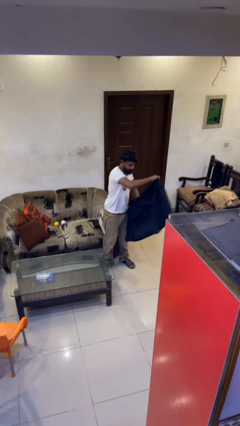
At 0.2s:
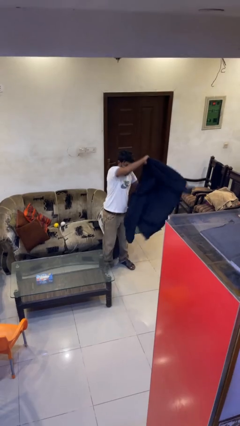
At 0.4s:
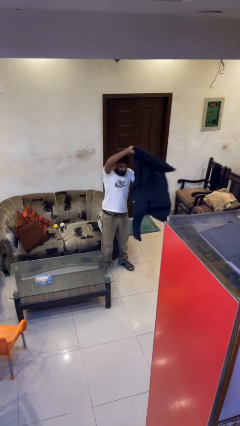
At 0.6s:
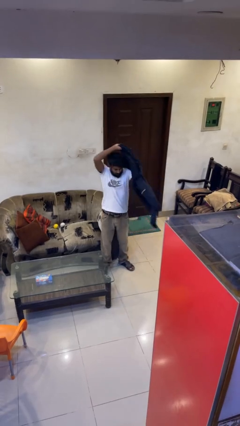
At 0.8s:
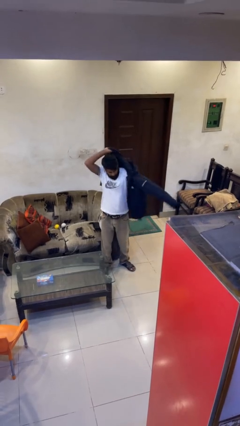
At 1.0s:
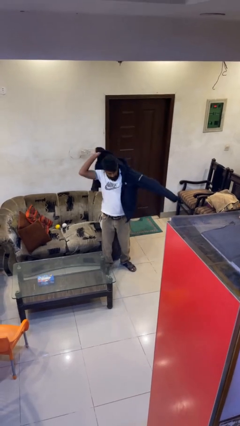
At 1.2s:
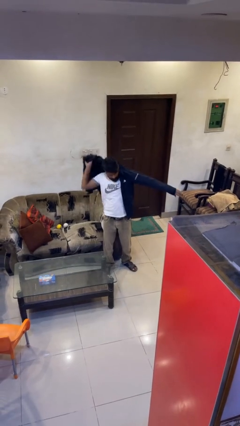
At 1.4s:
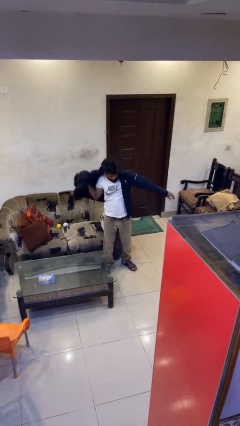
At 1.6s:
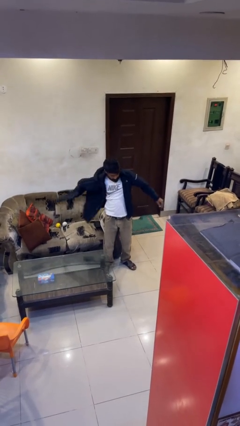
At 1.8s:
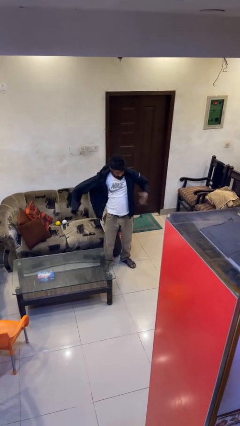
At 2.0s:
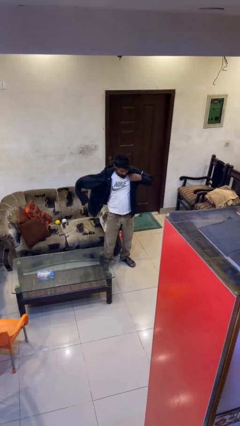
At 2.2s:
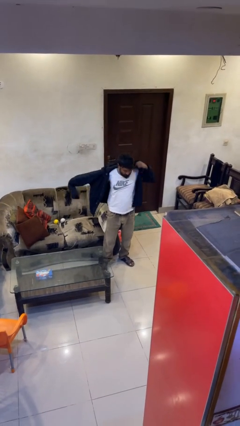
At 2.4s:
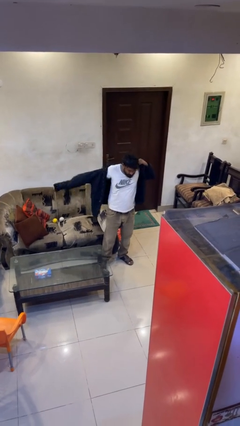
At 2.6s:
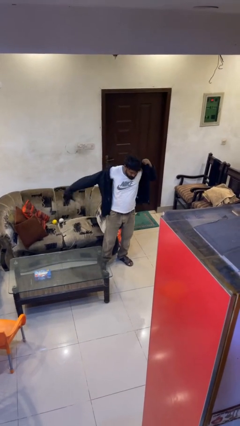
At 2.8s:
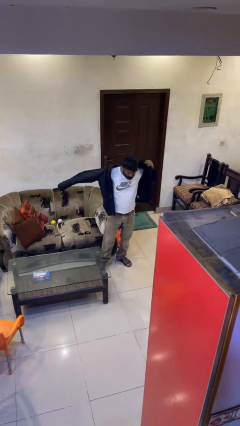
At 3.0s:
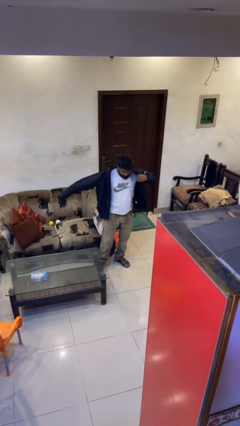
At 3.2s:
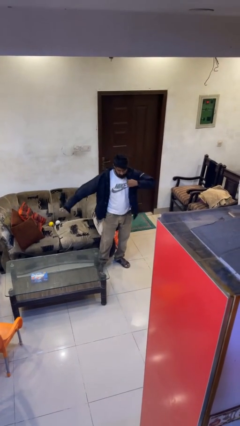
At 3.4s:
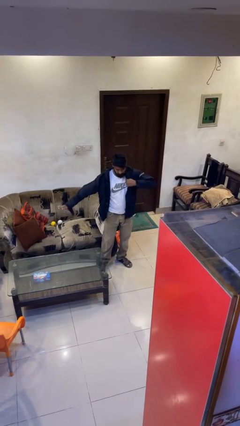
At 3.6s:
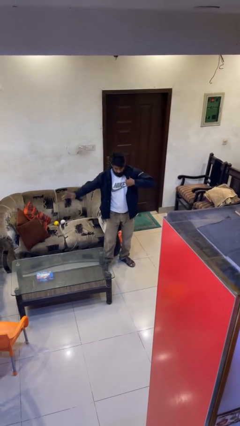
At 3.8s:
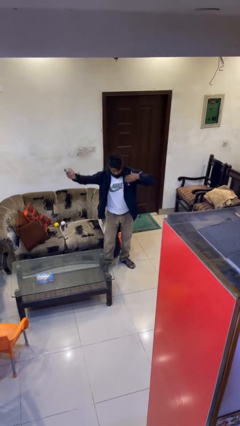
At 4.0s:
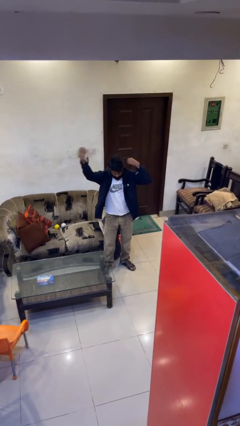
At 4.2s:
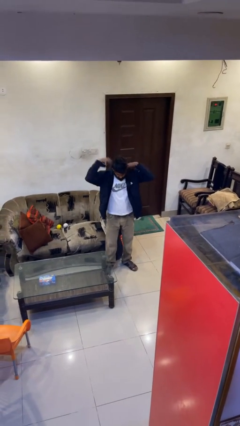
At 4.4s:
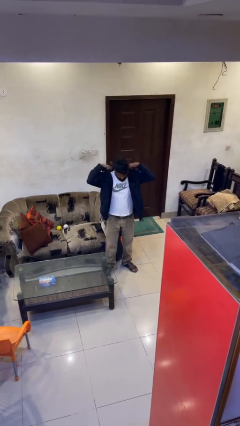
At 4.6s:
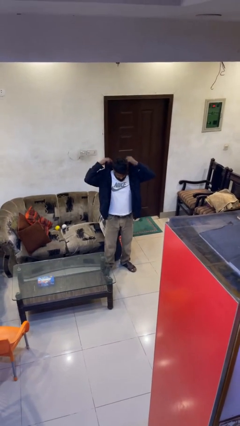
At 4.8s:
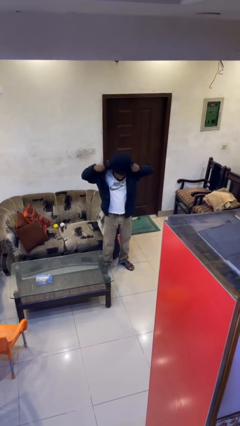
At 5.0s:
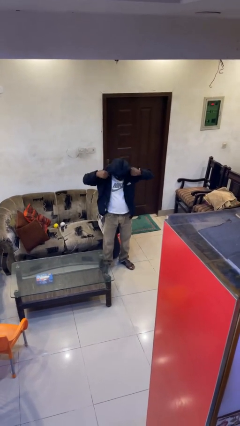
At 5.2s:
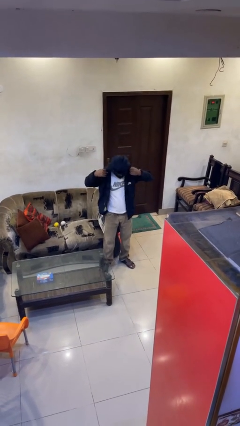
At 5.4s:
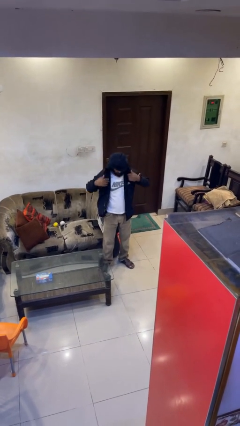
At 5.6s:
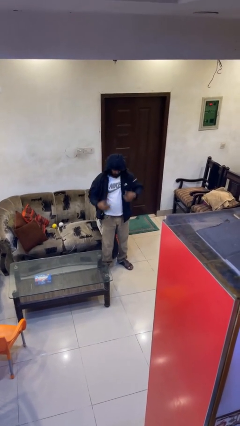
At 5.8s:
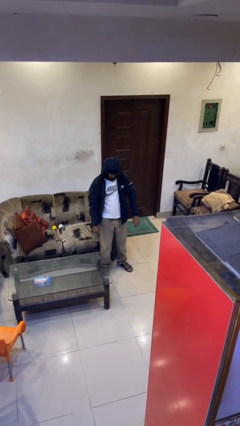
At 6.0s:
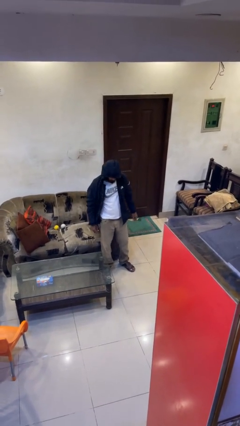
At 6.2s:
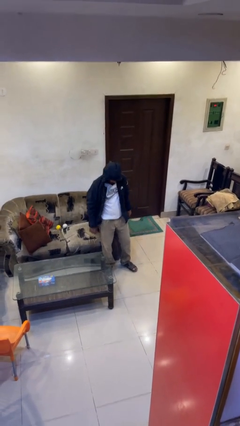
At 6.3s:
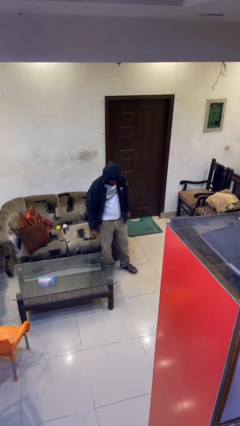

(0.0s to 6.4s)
person puts on hoodie

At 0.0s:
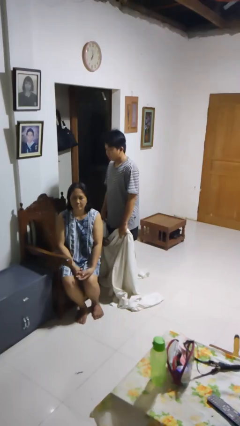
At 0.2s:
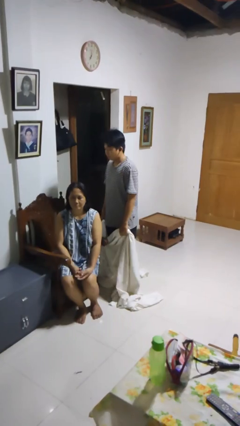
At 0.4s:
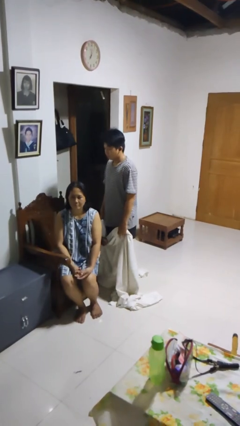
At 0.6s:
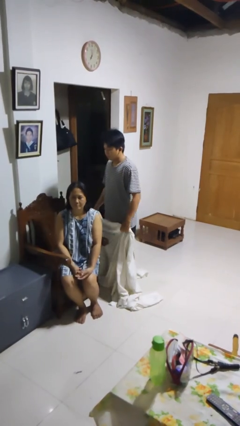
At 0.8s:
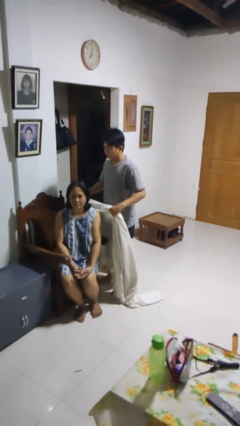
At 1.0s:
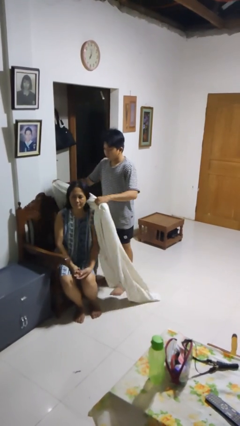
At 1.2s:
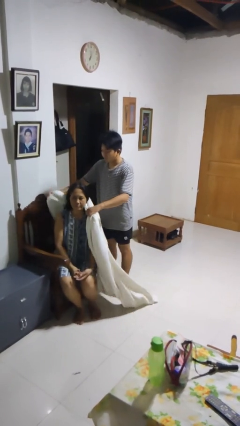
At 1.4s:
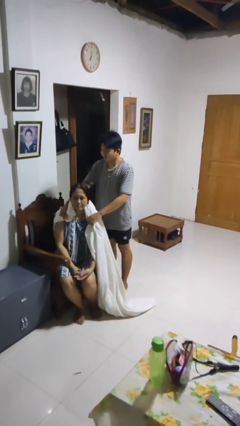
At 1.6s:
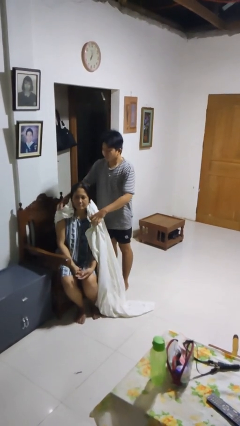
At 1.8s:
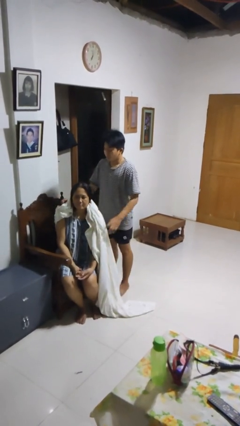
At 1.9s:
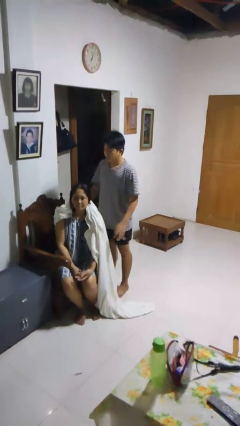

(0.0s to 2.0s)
person covers friend with blanket

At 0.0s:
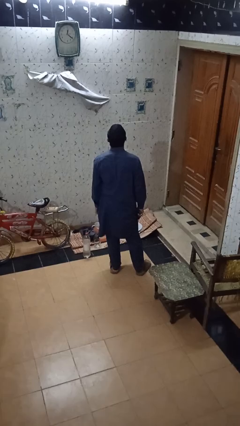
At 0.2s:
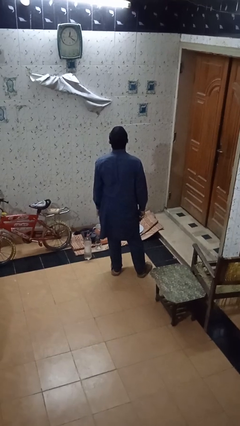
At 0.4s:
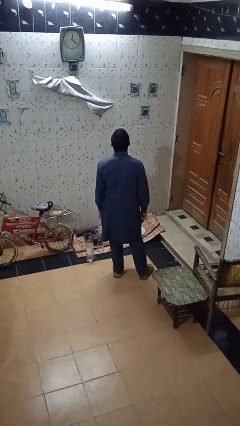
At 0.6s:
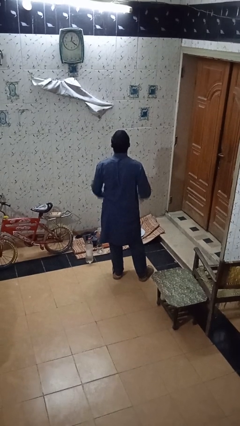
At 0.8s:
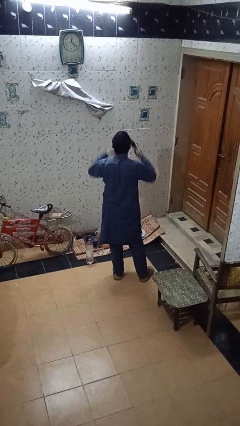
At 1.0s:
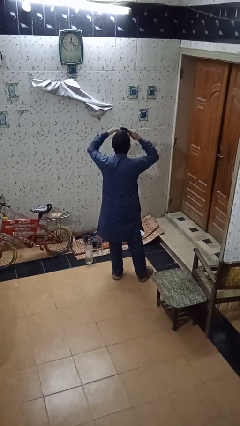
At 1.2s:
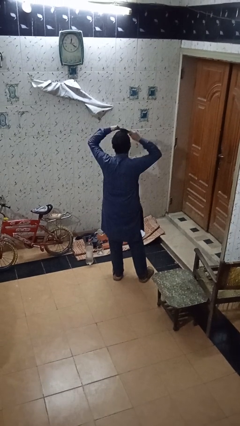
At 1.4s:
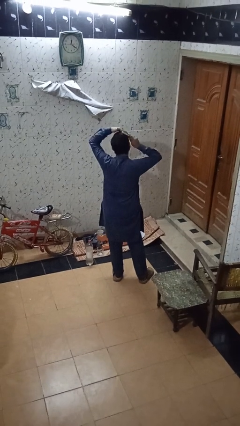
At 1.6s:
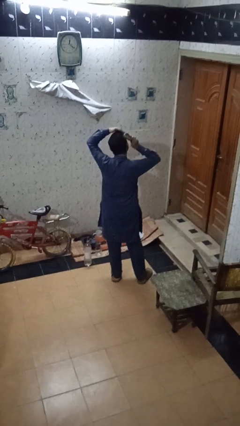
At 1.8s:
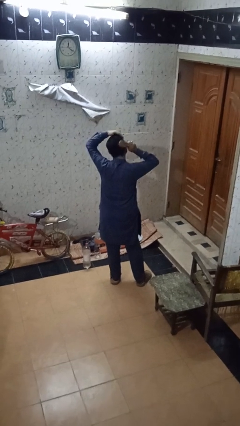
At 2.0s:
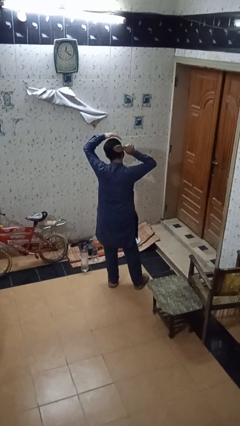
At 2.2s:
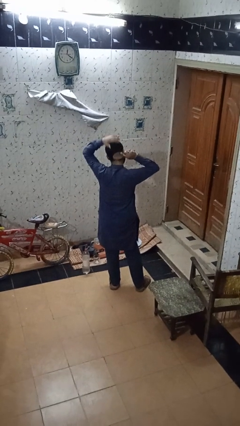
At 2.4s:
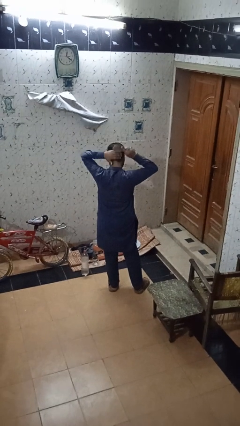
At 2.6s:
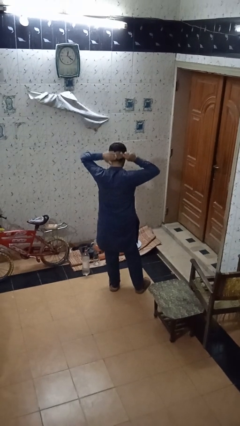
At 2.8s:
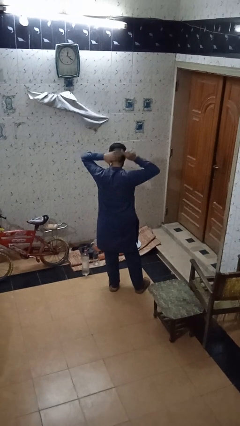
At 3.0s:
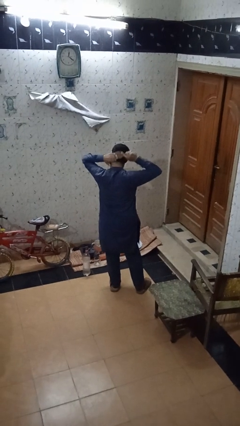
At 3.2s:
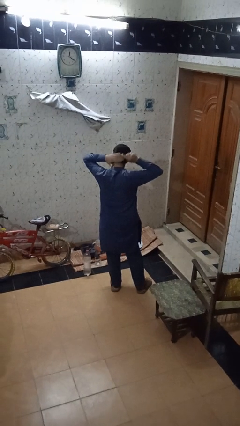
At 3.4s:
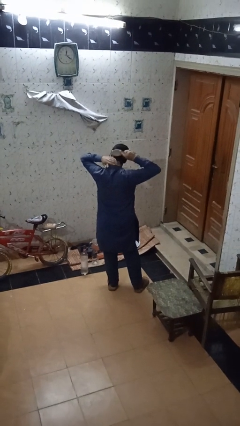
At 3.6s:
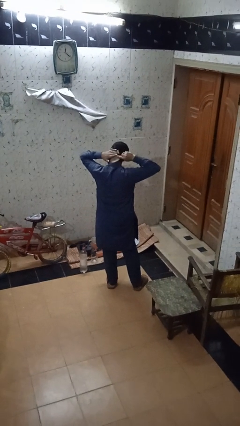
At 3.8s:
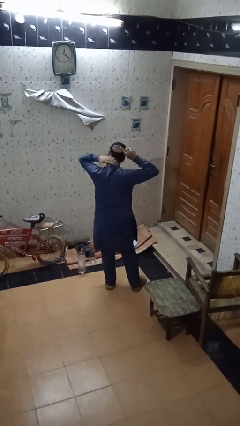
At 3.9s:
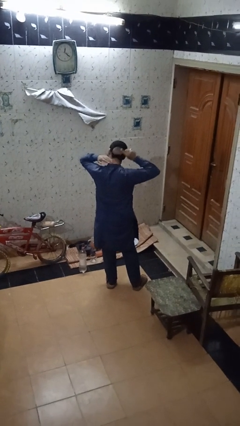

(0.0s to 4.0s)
person brushes hair

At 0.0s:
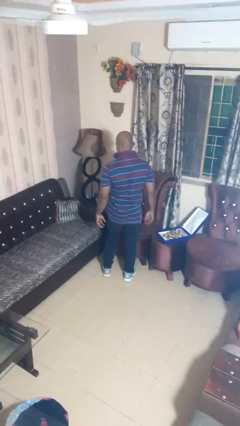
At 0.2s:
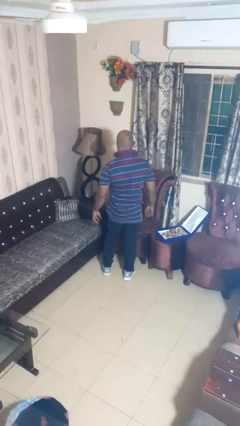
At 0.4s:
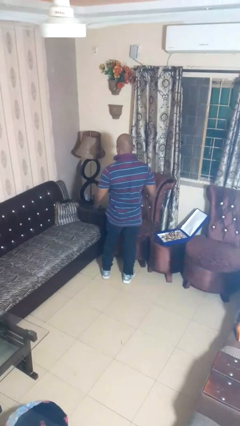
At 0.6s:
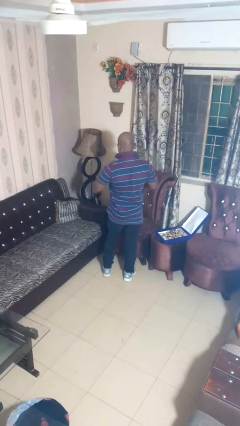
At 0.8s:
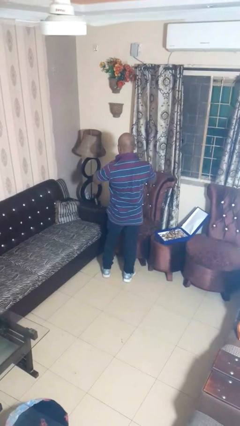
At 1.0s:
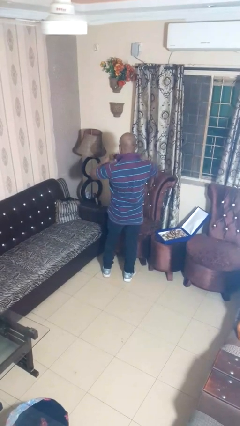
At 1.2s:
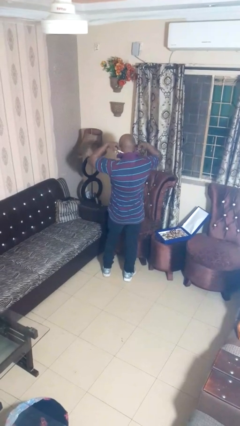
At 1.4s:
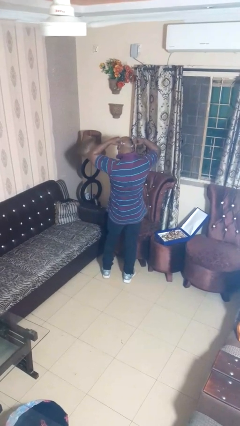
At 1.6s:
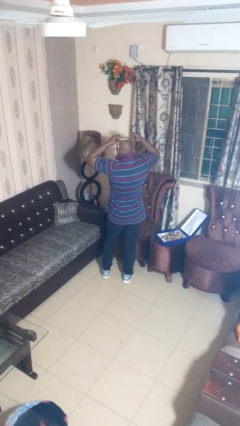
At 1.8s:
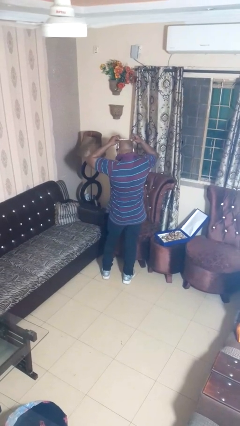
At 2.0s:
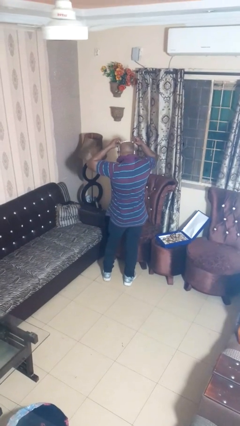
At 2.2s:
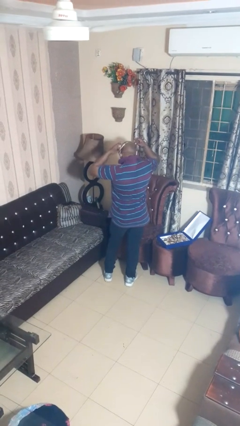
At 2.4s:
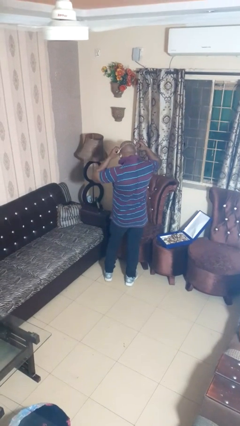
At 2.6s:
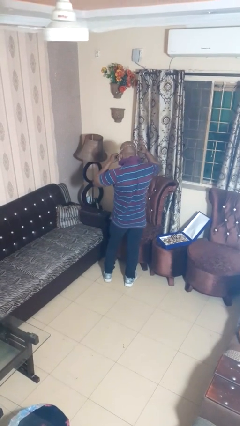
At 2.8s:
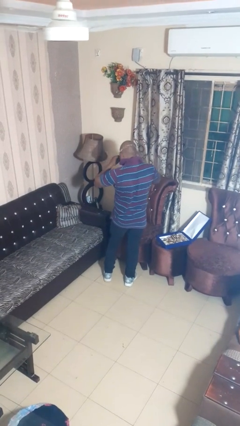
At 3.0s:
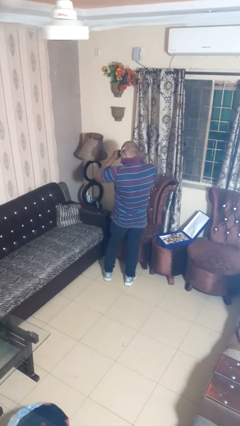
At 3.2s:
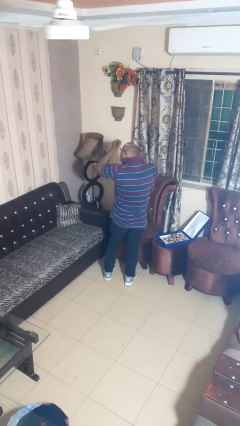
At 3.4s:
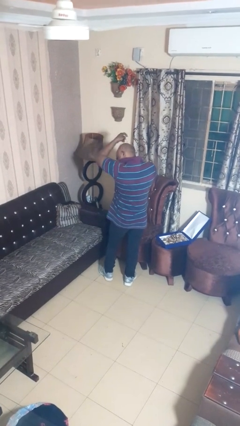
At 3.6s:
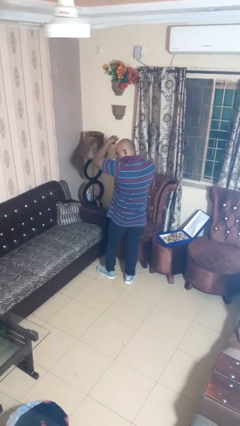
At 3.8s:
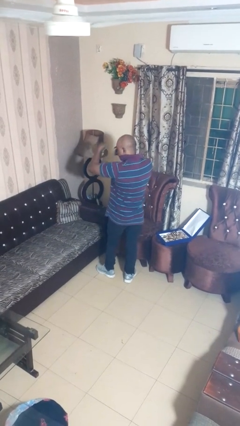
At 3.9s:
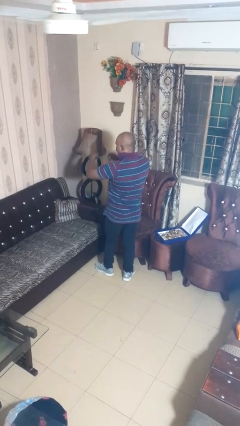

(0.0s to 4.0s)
person takes off necklace

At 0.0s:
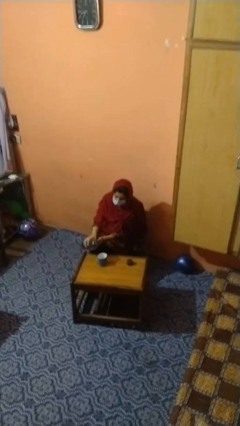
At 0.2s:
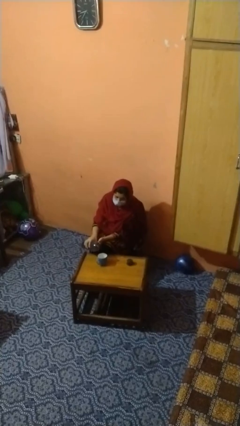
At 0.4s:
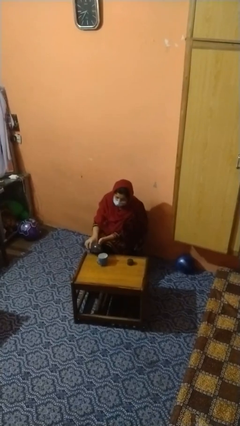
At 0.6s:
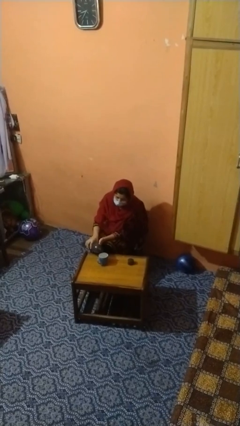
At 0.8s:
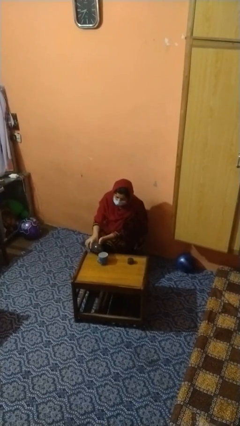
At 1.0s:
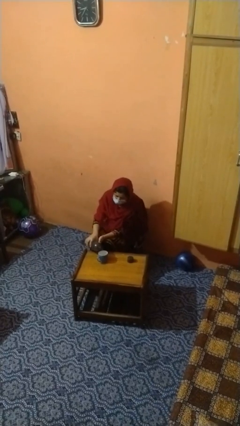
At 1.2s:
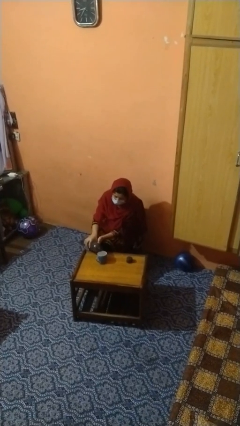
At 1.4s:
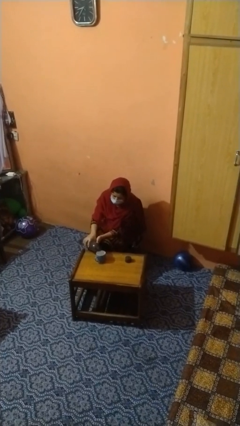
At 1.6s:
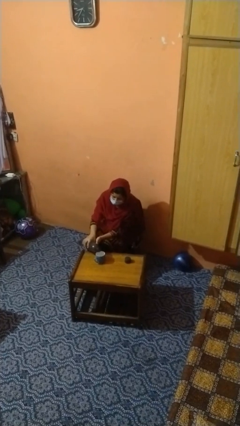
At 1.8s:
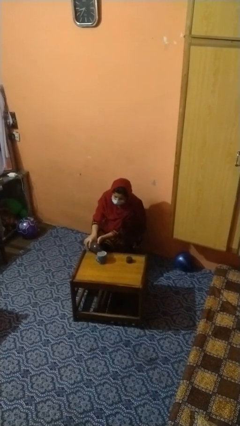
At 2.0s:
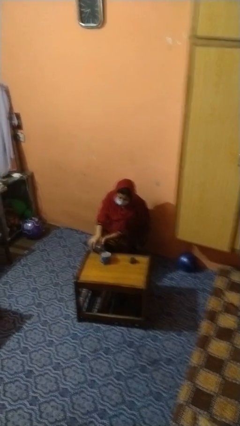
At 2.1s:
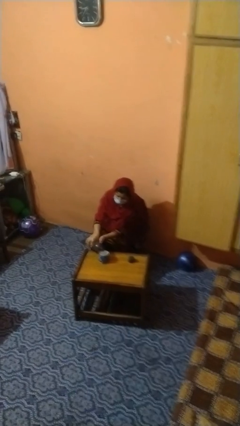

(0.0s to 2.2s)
person pours liquid into cup
